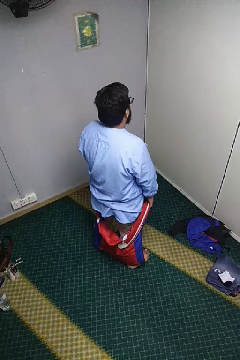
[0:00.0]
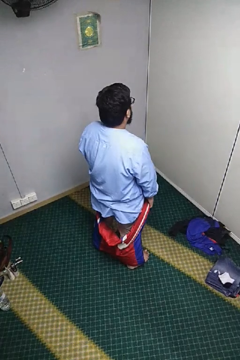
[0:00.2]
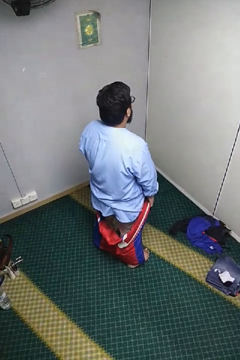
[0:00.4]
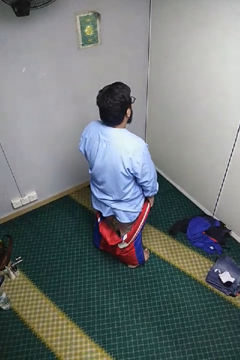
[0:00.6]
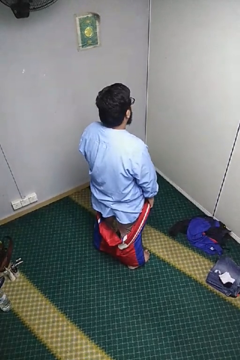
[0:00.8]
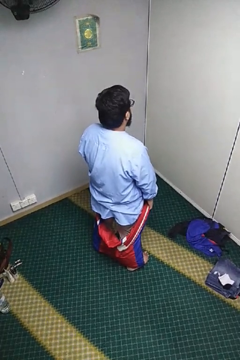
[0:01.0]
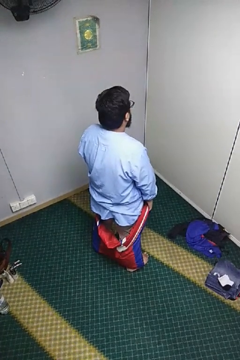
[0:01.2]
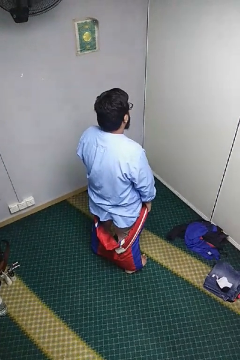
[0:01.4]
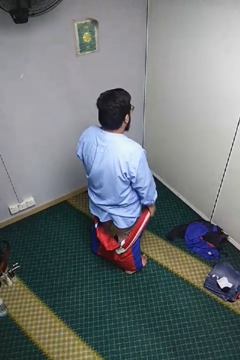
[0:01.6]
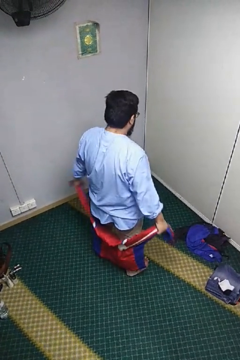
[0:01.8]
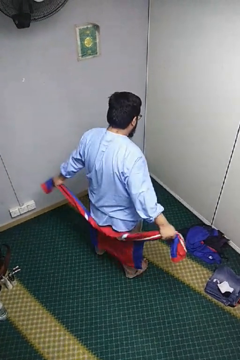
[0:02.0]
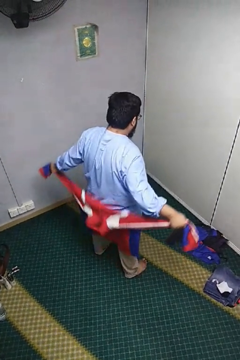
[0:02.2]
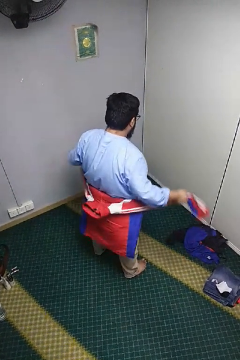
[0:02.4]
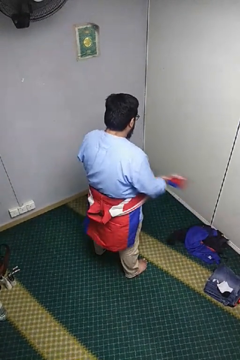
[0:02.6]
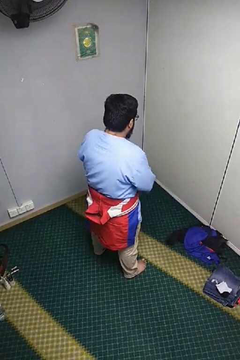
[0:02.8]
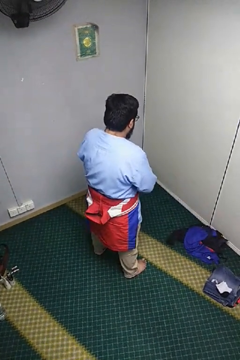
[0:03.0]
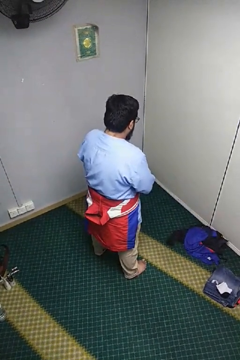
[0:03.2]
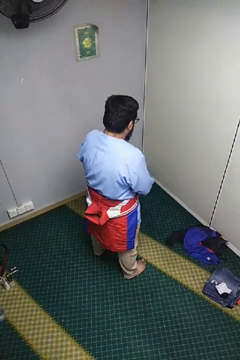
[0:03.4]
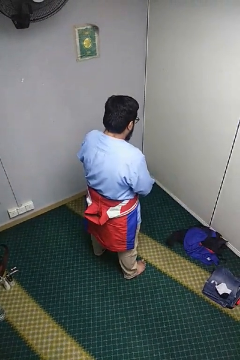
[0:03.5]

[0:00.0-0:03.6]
person ties jacket around waist

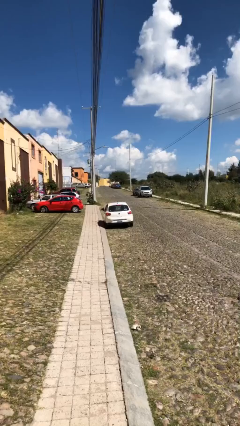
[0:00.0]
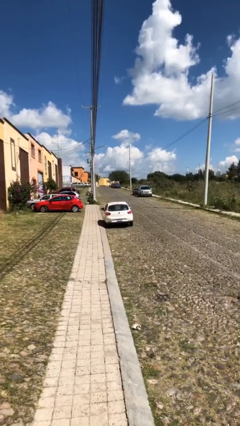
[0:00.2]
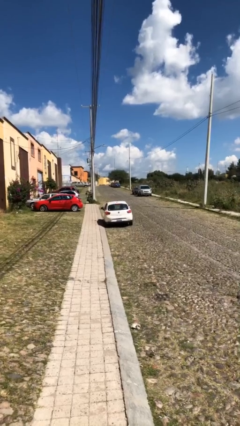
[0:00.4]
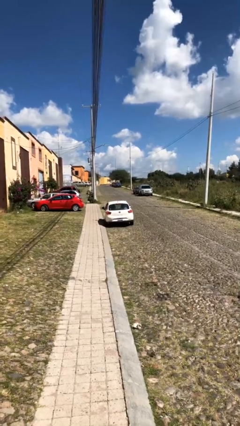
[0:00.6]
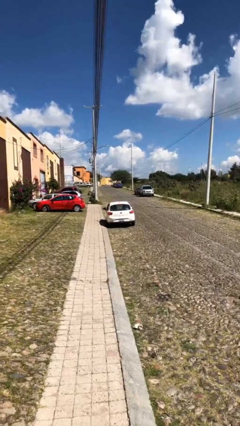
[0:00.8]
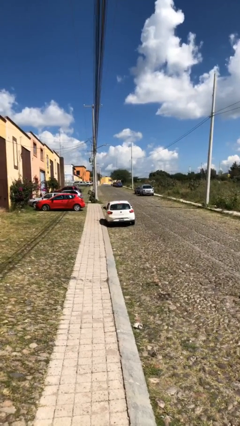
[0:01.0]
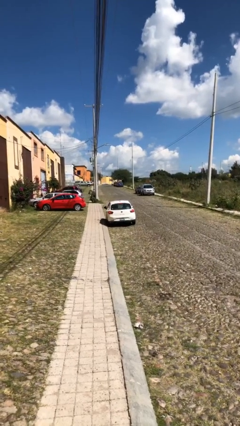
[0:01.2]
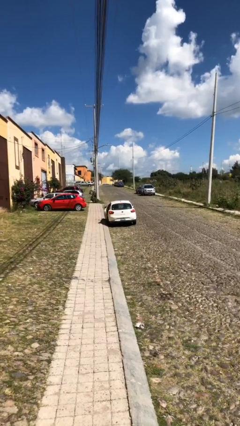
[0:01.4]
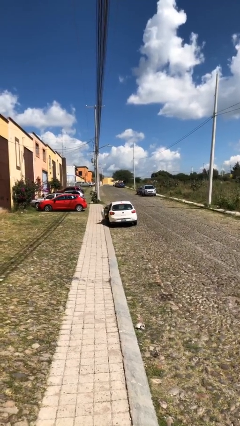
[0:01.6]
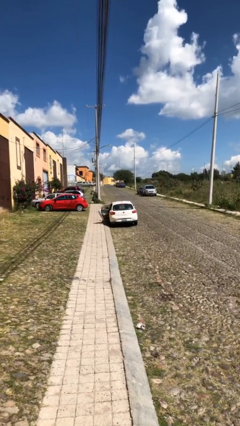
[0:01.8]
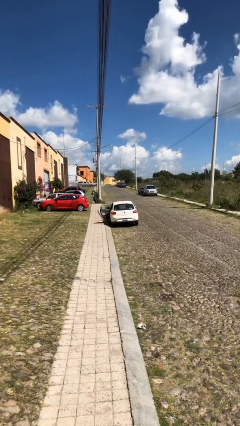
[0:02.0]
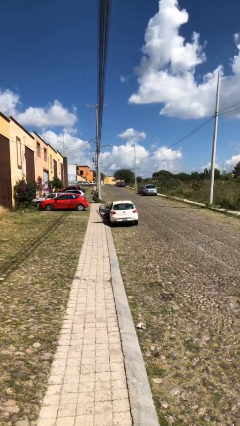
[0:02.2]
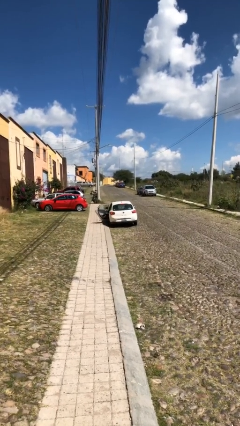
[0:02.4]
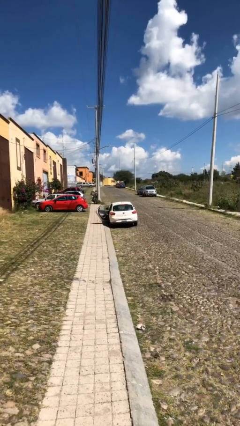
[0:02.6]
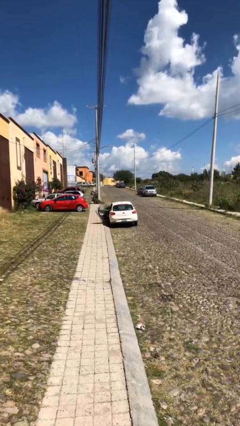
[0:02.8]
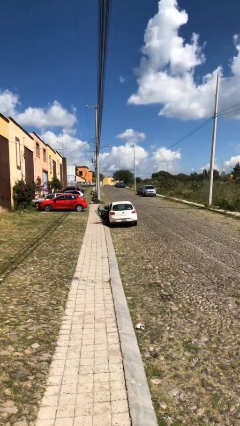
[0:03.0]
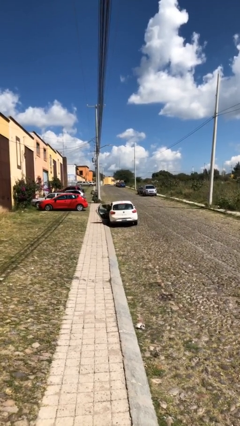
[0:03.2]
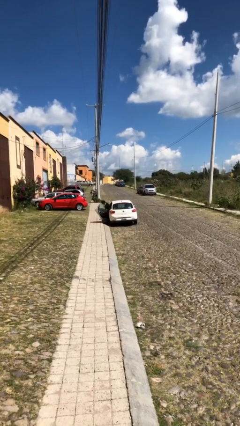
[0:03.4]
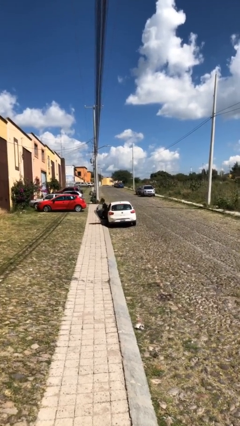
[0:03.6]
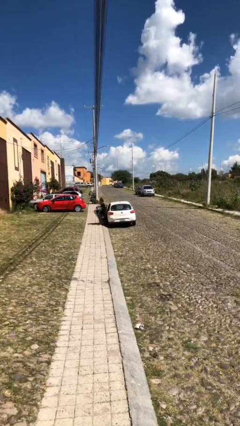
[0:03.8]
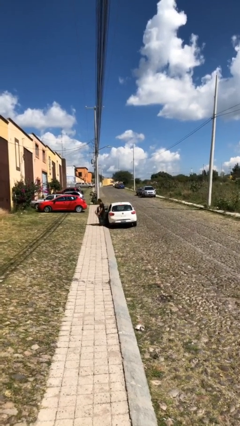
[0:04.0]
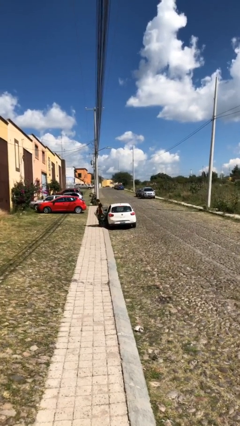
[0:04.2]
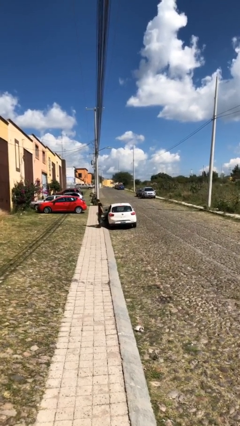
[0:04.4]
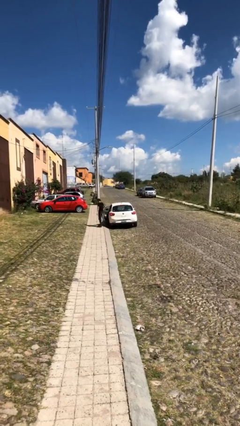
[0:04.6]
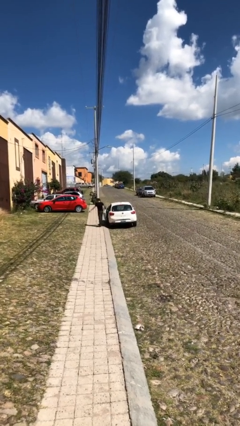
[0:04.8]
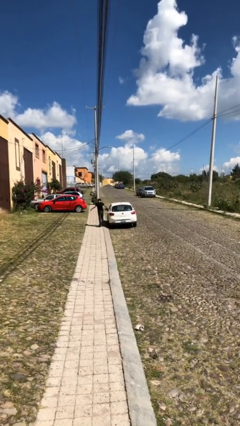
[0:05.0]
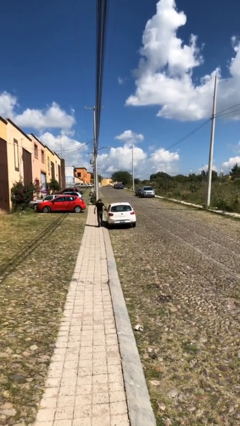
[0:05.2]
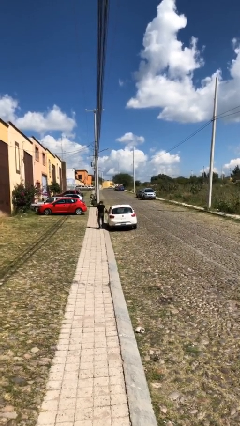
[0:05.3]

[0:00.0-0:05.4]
car drops off person

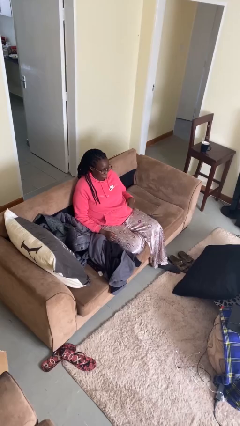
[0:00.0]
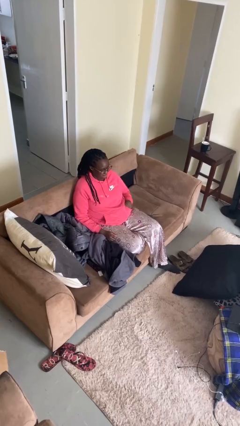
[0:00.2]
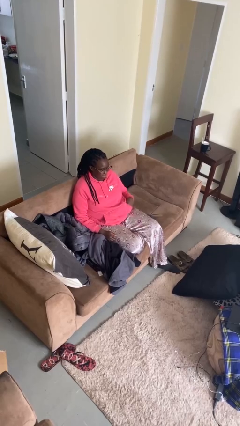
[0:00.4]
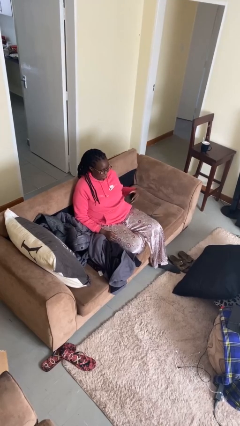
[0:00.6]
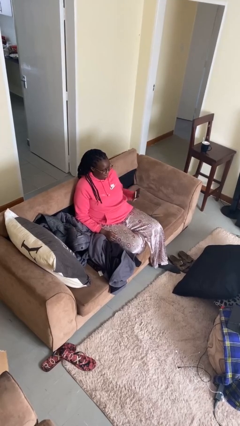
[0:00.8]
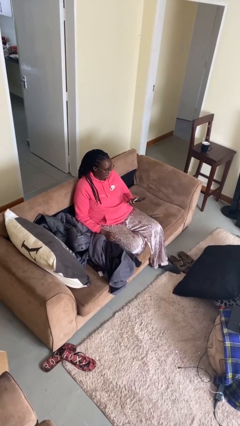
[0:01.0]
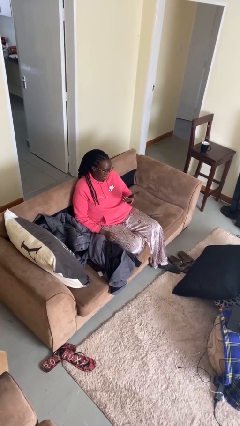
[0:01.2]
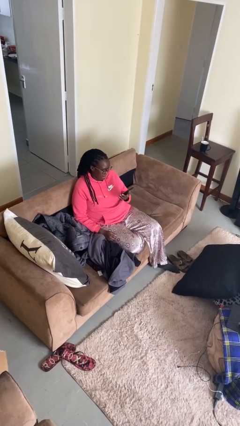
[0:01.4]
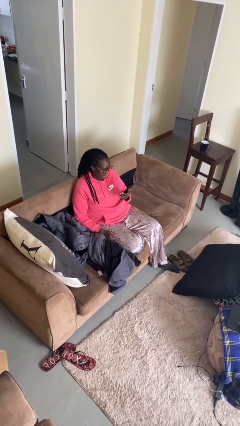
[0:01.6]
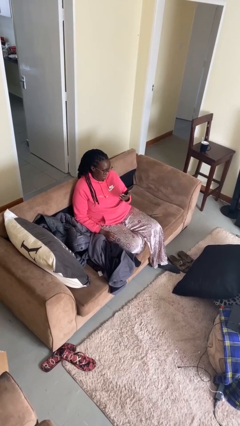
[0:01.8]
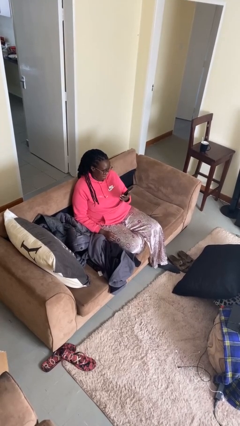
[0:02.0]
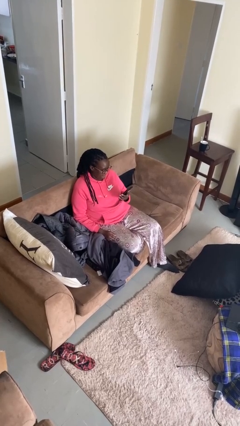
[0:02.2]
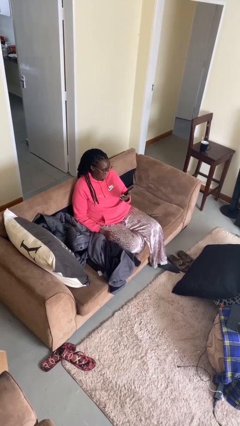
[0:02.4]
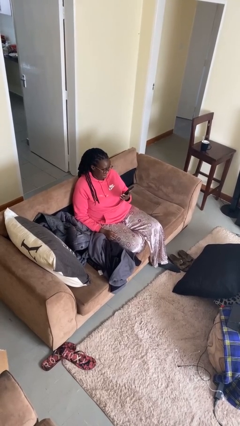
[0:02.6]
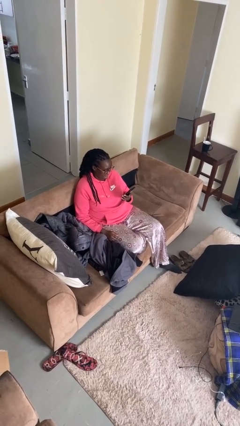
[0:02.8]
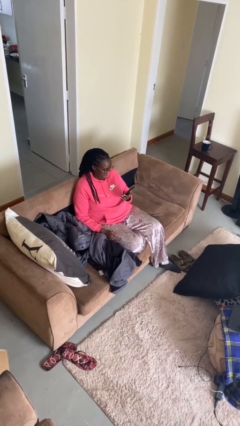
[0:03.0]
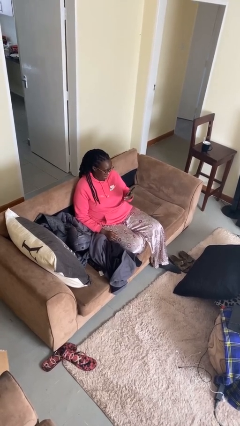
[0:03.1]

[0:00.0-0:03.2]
person takes phone from pocket

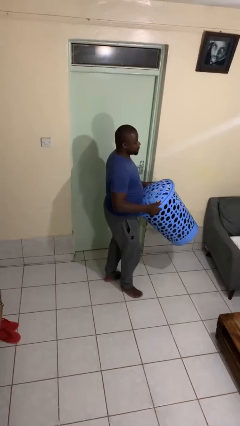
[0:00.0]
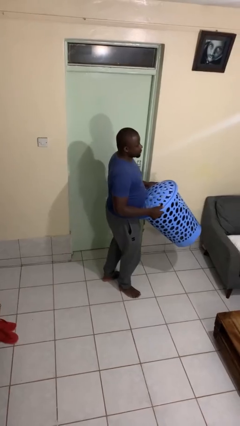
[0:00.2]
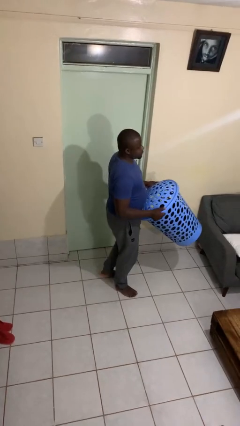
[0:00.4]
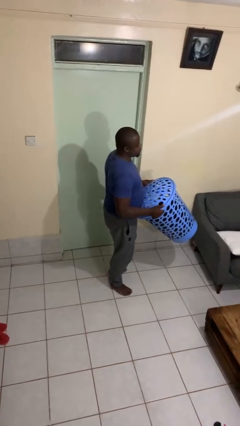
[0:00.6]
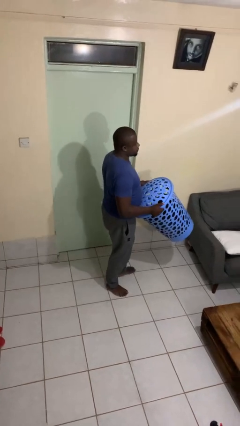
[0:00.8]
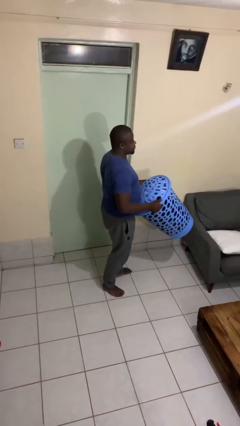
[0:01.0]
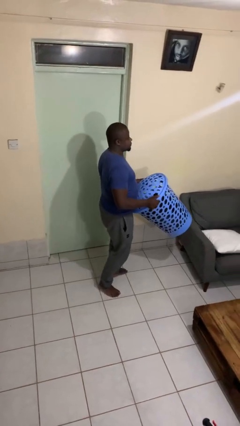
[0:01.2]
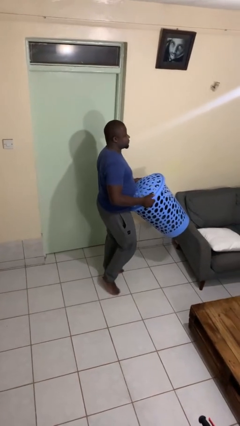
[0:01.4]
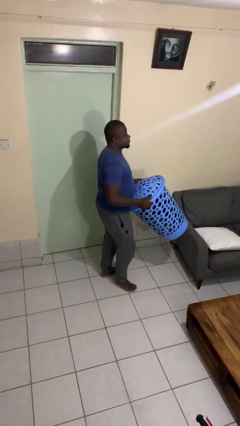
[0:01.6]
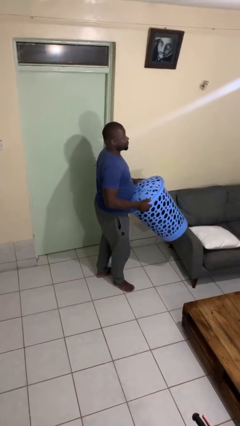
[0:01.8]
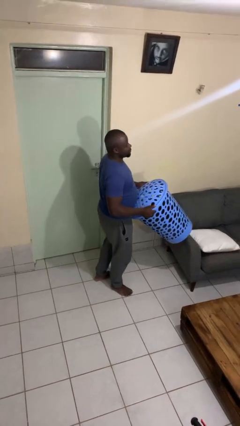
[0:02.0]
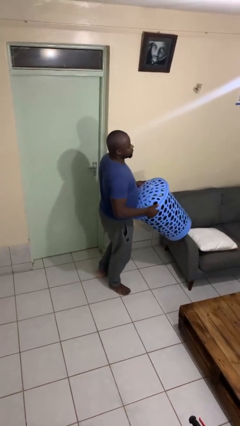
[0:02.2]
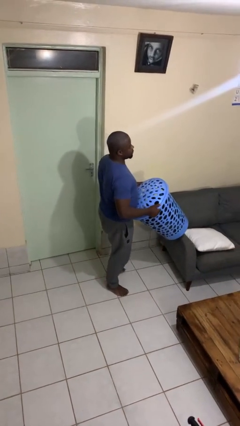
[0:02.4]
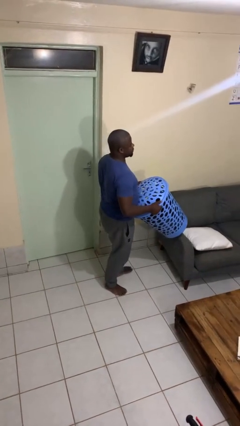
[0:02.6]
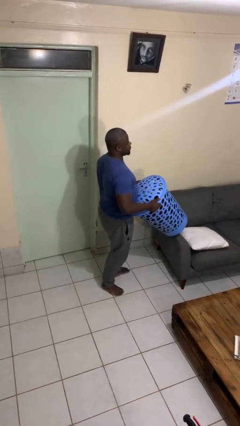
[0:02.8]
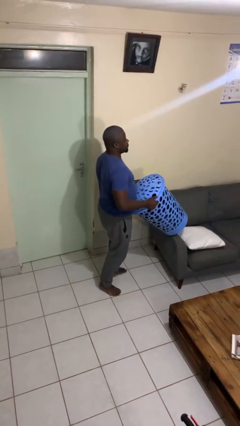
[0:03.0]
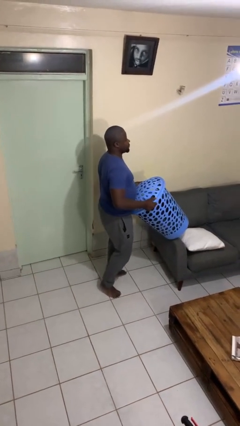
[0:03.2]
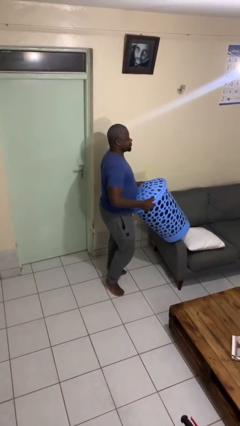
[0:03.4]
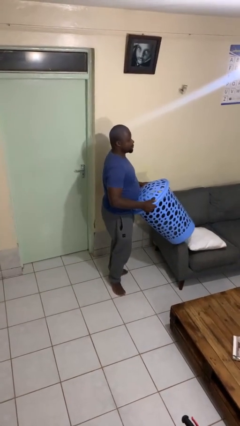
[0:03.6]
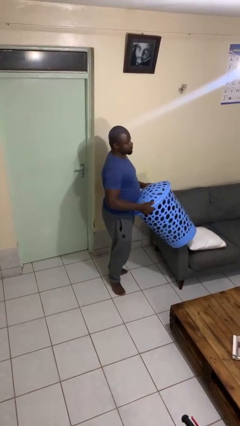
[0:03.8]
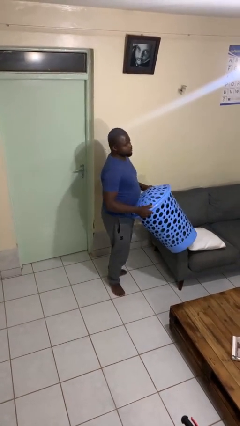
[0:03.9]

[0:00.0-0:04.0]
person carries laundry basket

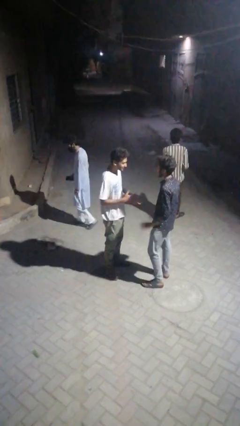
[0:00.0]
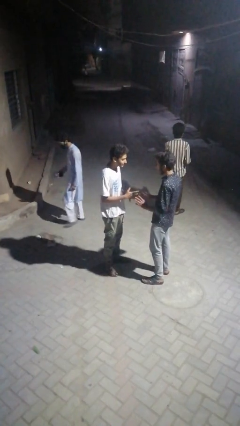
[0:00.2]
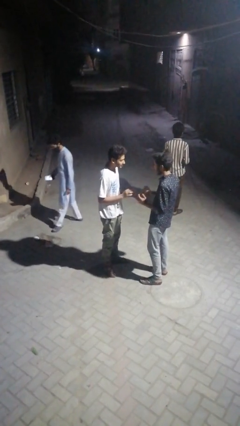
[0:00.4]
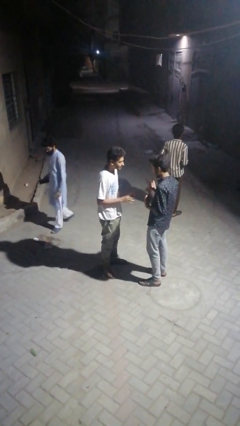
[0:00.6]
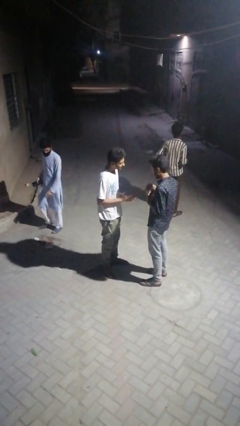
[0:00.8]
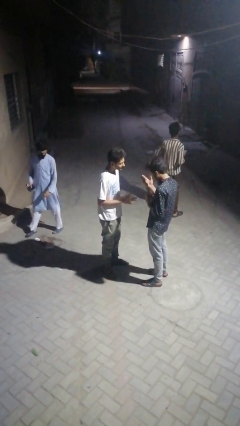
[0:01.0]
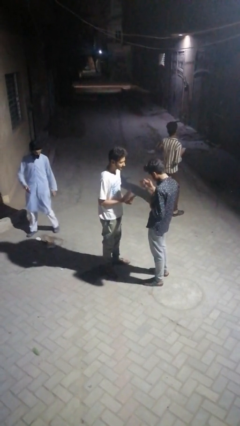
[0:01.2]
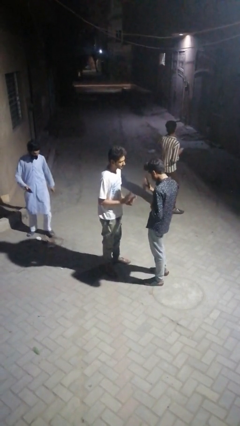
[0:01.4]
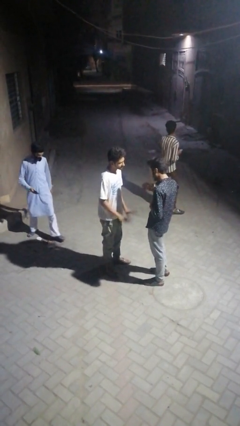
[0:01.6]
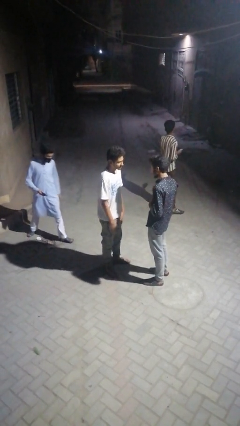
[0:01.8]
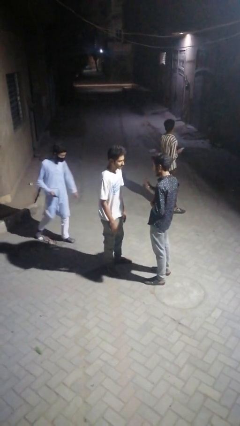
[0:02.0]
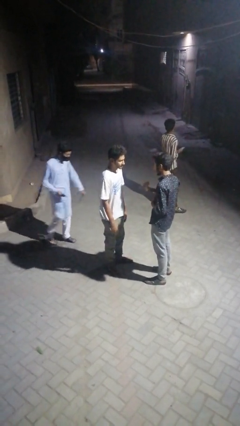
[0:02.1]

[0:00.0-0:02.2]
person talks to person
